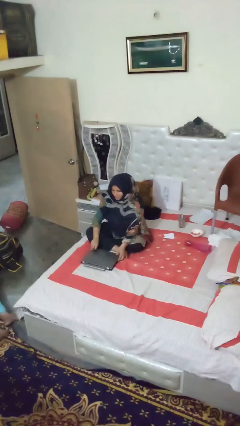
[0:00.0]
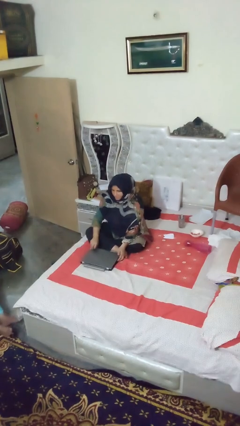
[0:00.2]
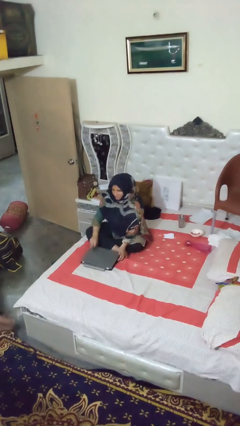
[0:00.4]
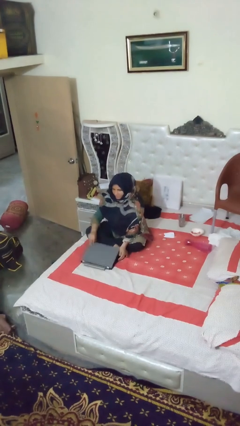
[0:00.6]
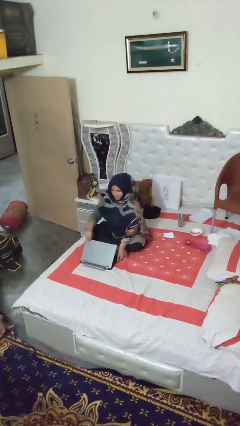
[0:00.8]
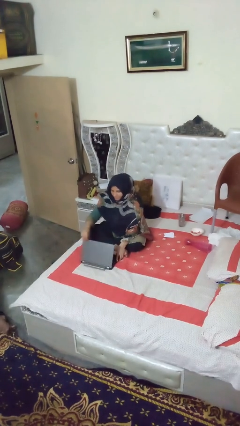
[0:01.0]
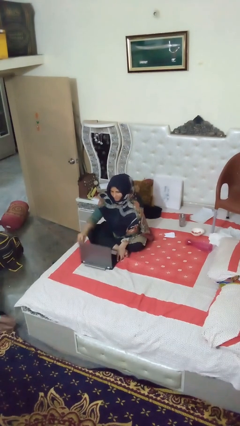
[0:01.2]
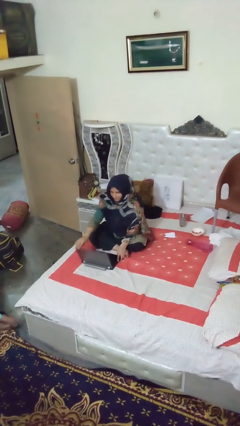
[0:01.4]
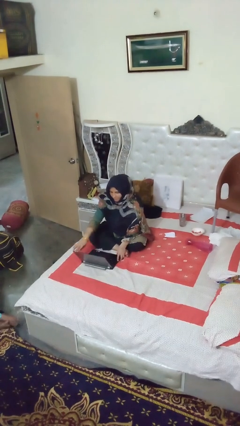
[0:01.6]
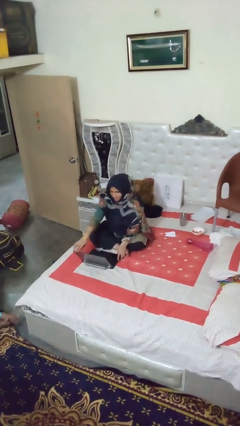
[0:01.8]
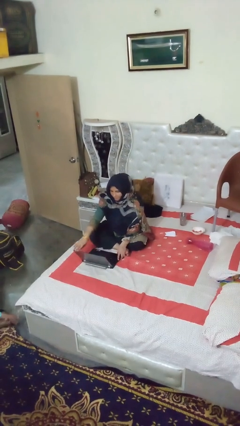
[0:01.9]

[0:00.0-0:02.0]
person opens laptop

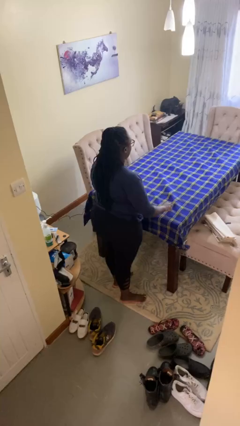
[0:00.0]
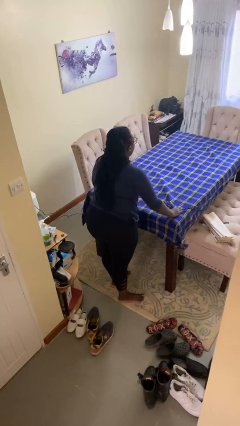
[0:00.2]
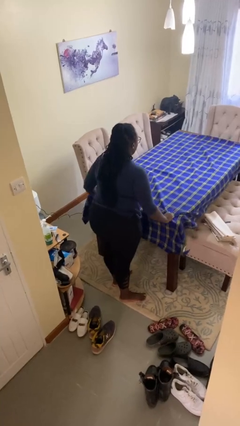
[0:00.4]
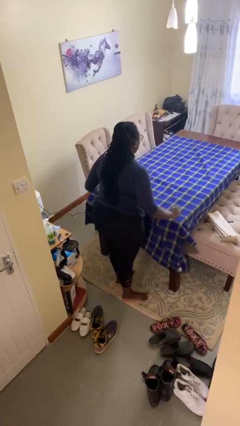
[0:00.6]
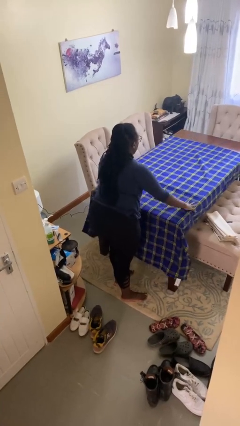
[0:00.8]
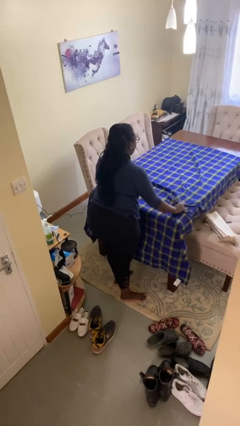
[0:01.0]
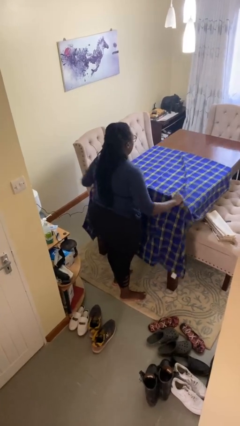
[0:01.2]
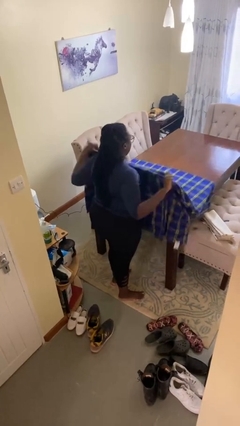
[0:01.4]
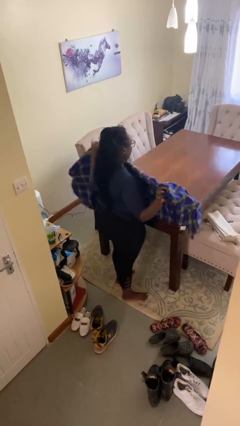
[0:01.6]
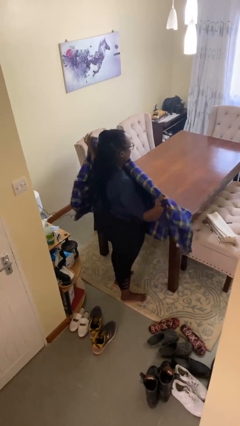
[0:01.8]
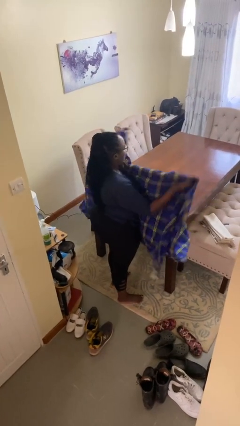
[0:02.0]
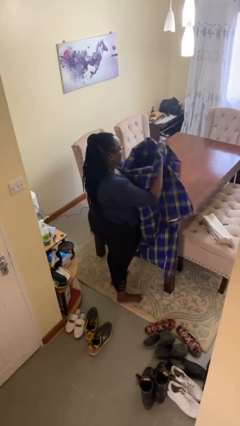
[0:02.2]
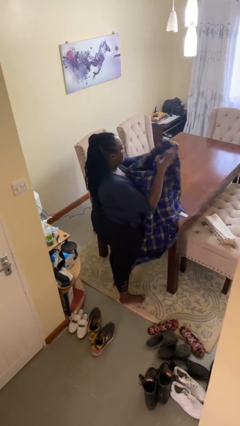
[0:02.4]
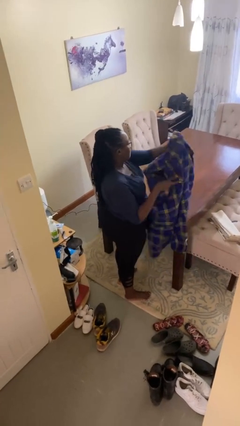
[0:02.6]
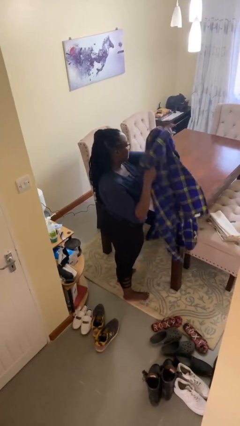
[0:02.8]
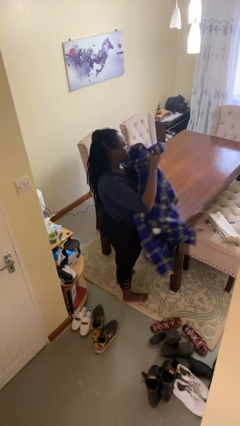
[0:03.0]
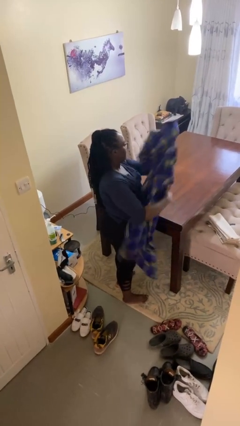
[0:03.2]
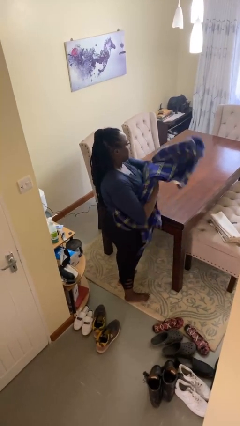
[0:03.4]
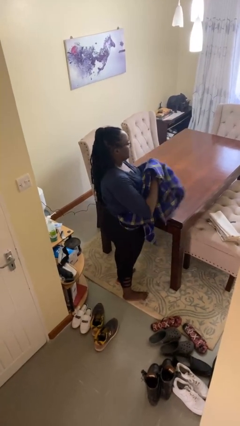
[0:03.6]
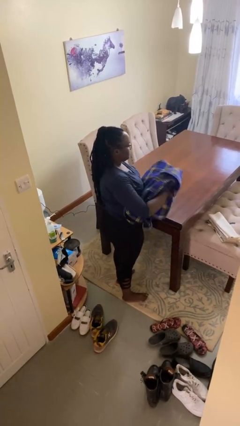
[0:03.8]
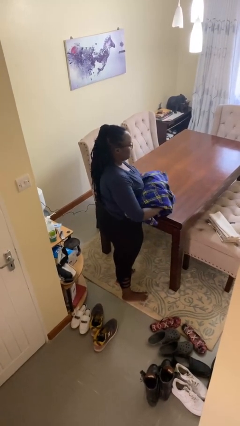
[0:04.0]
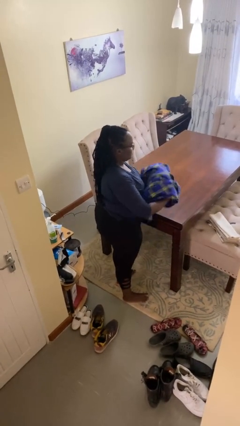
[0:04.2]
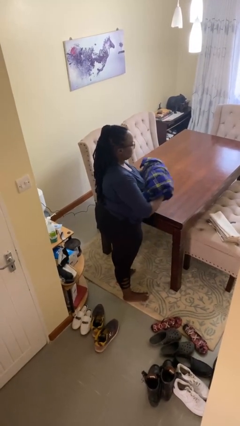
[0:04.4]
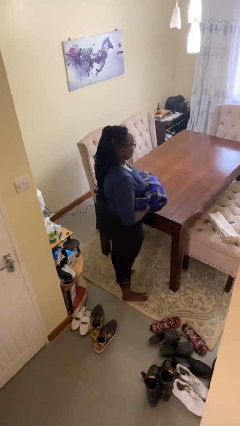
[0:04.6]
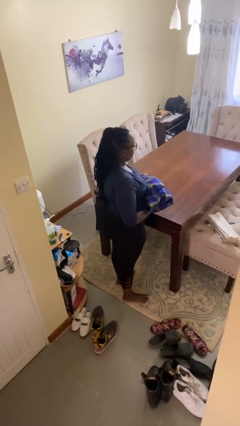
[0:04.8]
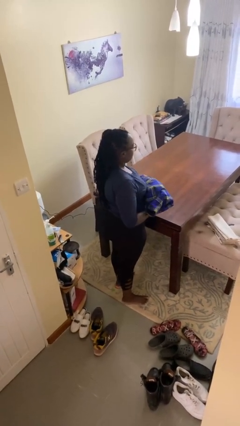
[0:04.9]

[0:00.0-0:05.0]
person folds tablecloth

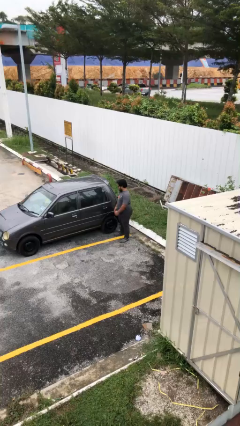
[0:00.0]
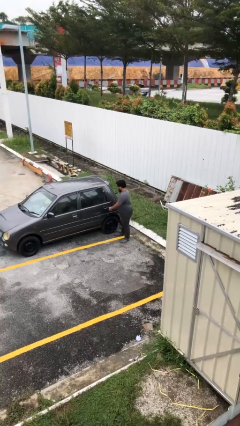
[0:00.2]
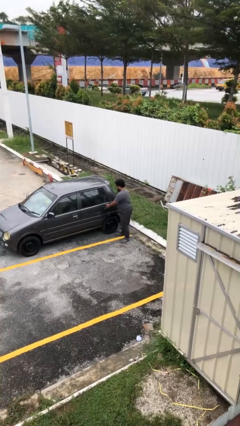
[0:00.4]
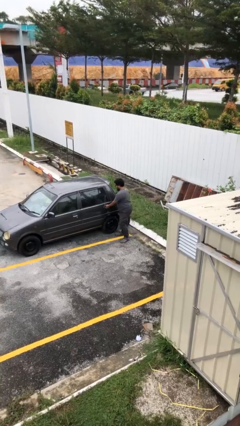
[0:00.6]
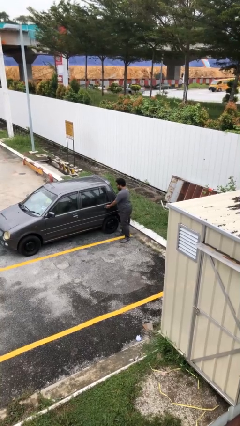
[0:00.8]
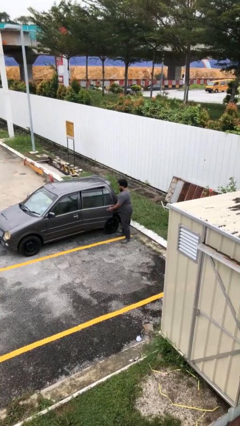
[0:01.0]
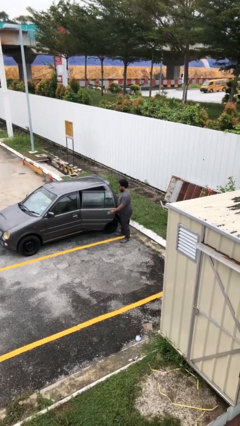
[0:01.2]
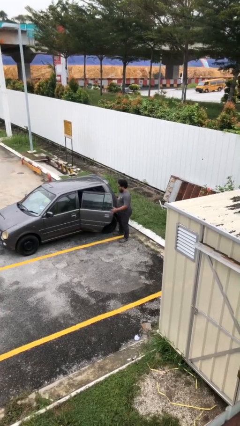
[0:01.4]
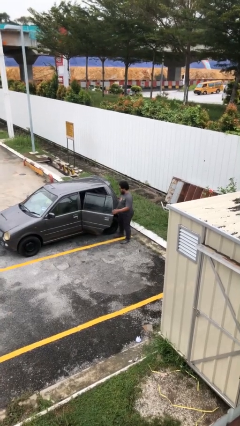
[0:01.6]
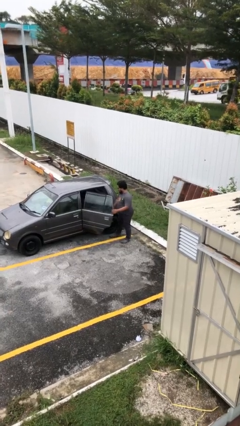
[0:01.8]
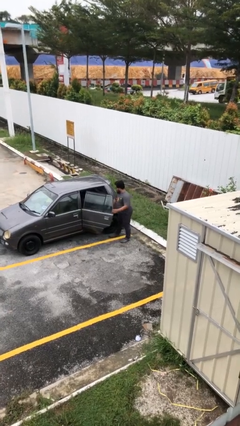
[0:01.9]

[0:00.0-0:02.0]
person opens car door

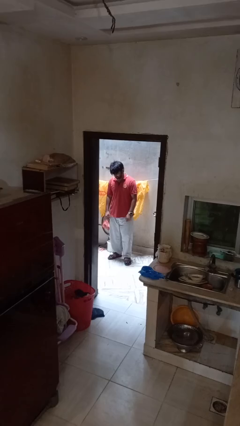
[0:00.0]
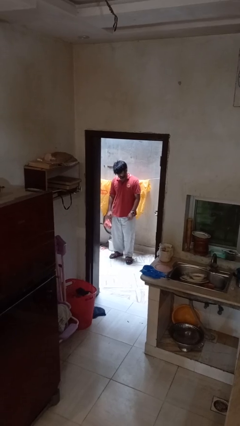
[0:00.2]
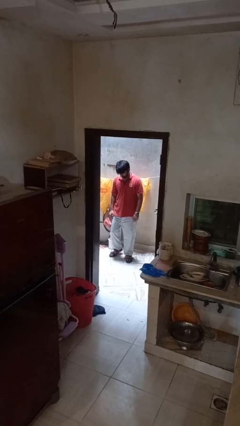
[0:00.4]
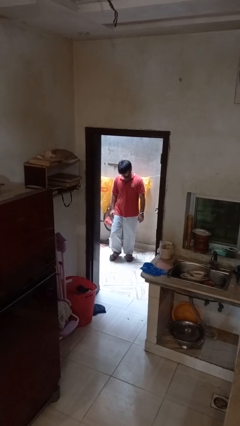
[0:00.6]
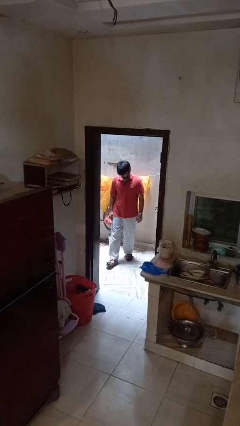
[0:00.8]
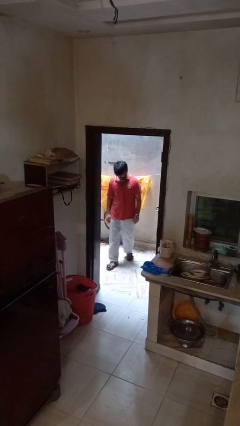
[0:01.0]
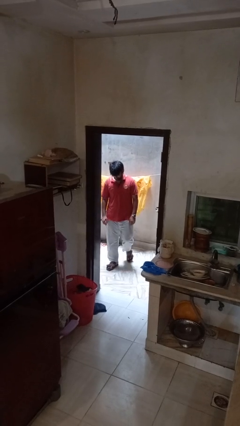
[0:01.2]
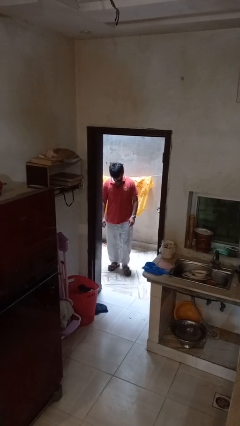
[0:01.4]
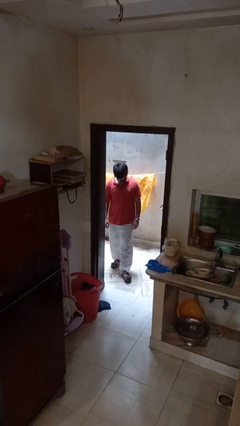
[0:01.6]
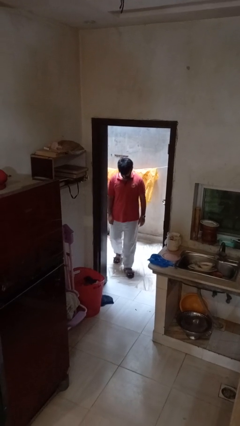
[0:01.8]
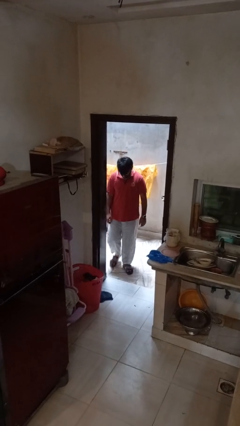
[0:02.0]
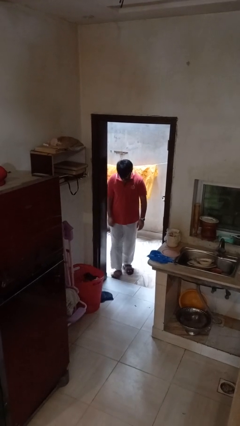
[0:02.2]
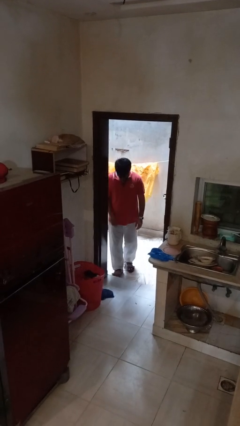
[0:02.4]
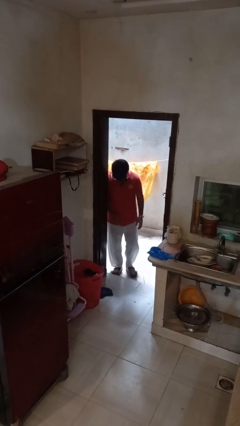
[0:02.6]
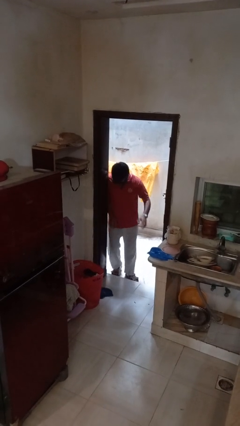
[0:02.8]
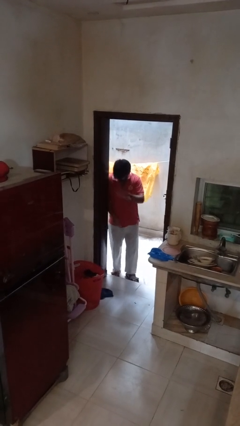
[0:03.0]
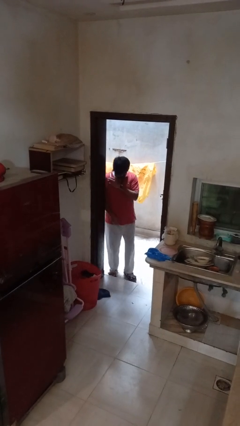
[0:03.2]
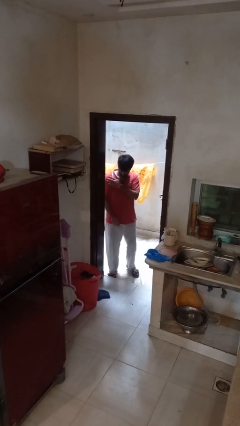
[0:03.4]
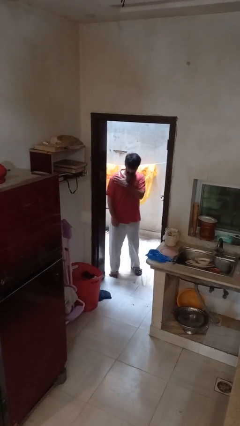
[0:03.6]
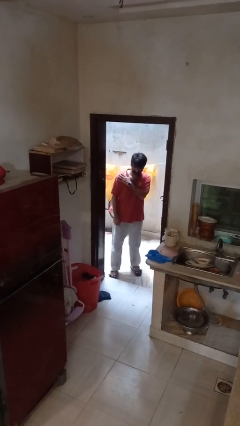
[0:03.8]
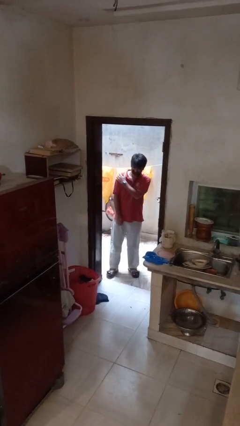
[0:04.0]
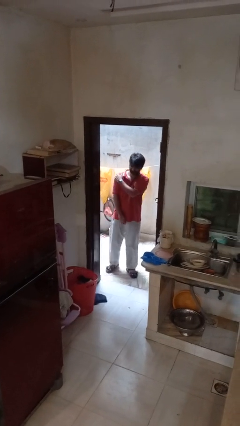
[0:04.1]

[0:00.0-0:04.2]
person bumps into wall

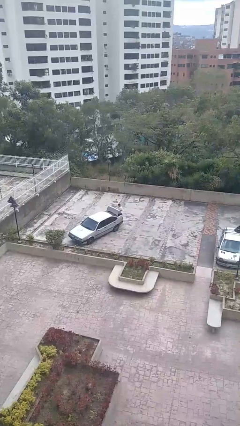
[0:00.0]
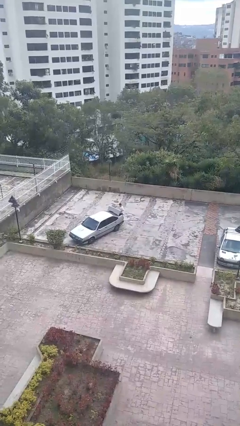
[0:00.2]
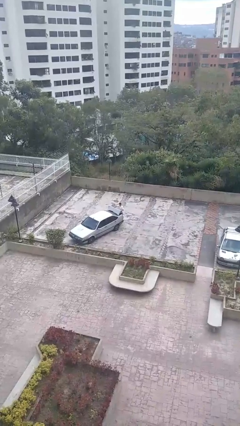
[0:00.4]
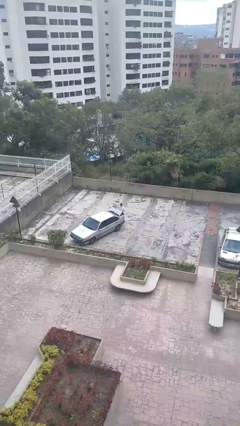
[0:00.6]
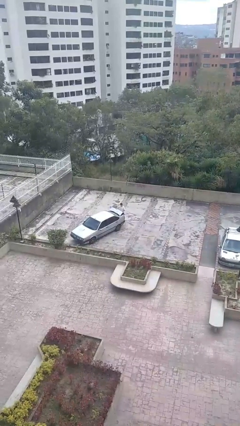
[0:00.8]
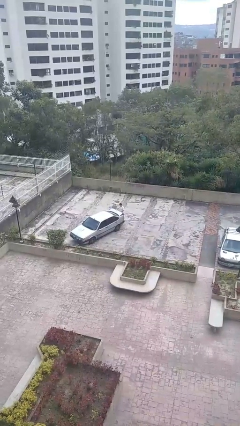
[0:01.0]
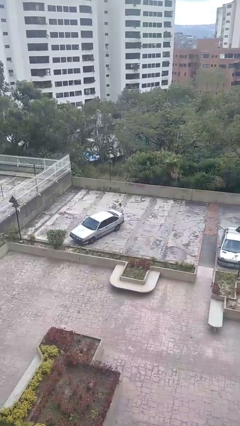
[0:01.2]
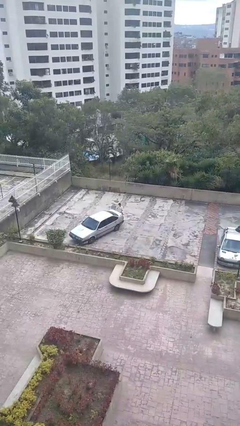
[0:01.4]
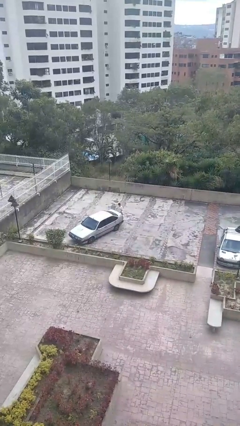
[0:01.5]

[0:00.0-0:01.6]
person closes car trunk

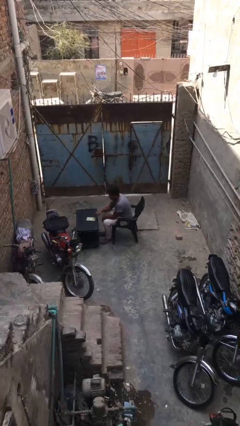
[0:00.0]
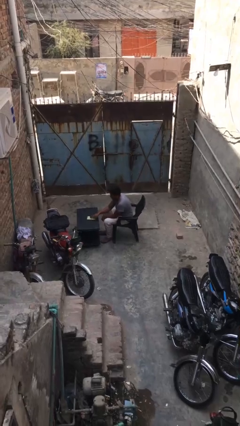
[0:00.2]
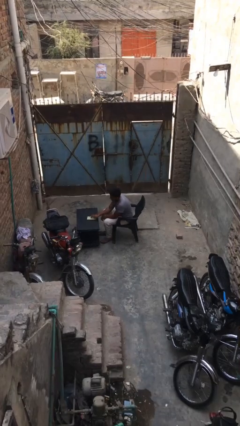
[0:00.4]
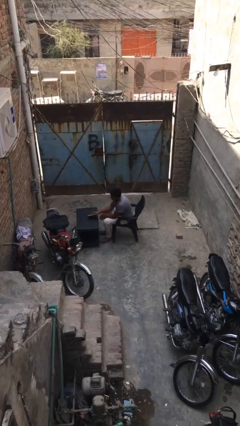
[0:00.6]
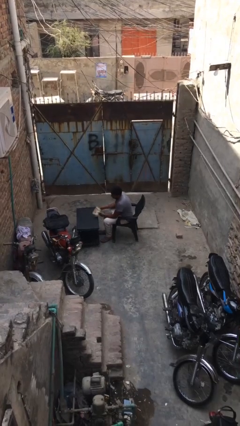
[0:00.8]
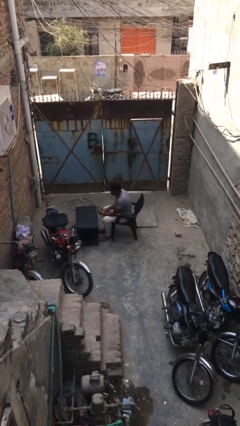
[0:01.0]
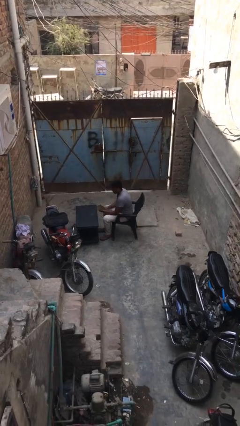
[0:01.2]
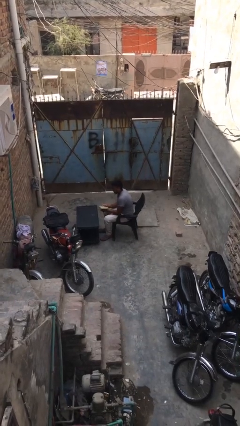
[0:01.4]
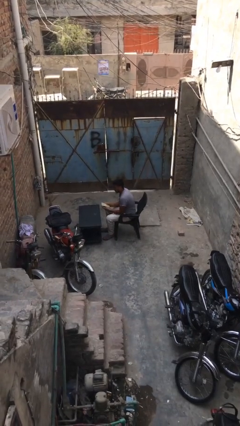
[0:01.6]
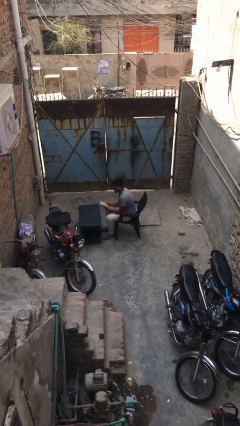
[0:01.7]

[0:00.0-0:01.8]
person picks up object from table

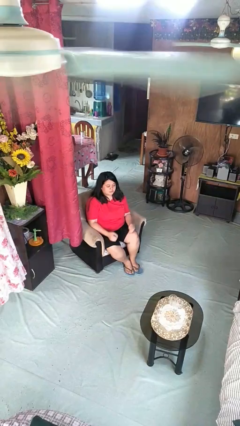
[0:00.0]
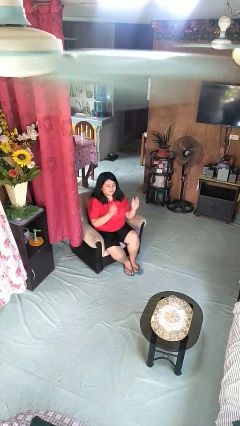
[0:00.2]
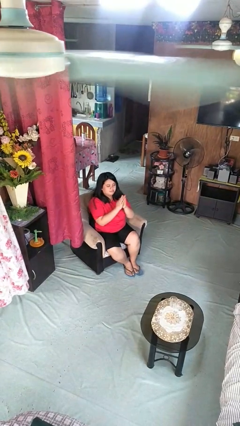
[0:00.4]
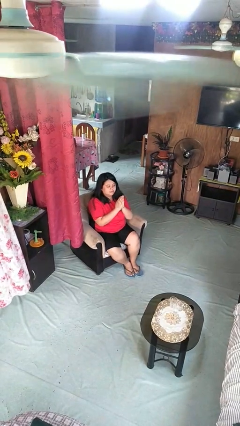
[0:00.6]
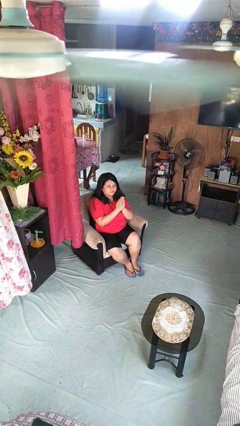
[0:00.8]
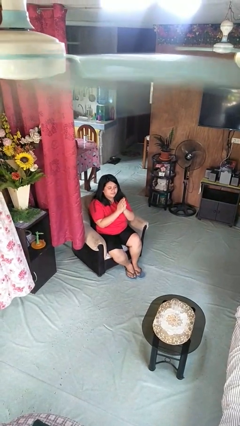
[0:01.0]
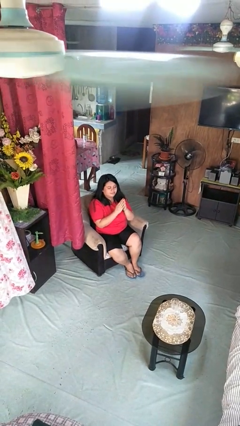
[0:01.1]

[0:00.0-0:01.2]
person claps hands
